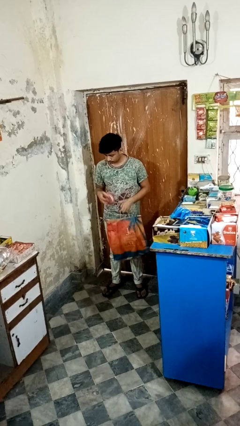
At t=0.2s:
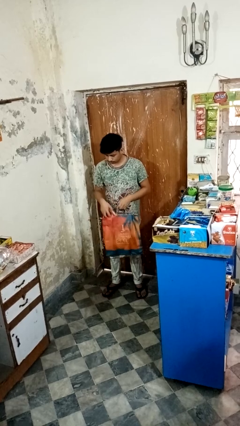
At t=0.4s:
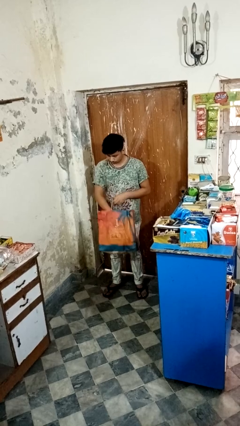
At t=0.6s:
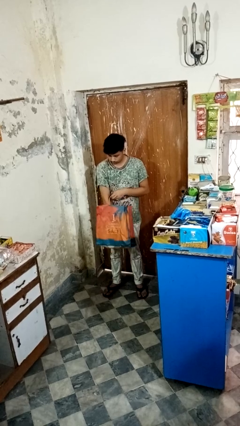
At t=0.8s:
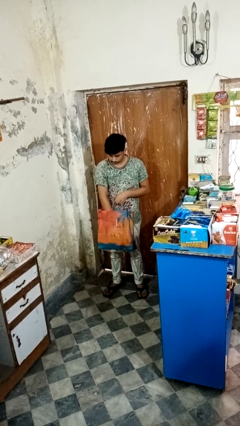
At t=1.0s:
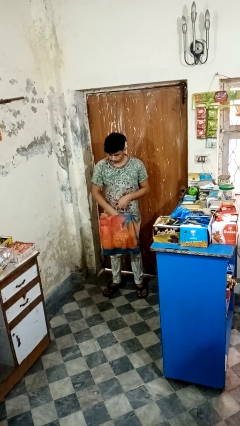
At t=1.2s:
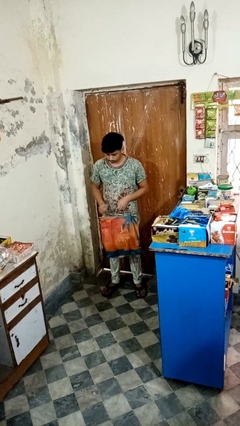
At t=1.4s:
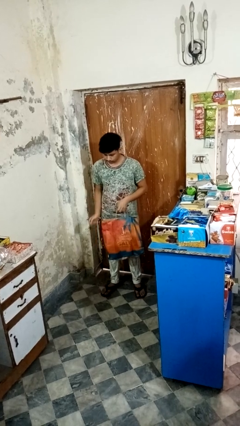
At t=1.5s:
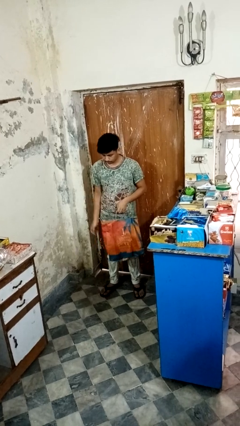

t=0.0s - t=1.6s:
person puts object into bag

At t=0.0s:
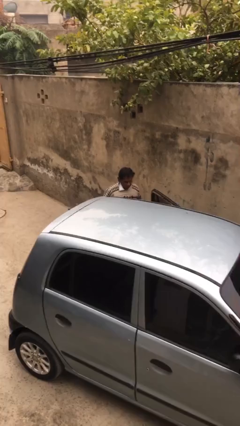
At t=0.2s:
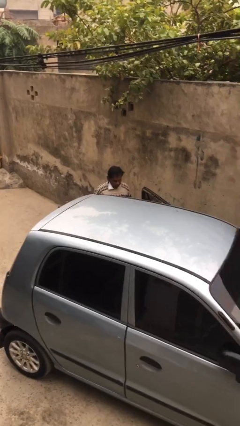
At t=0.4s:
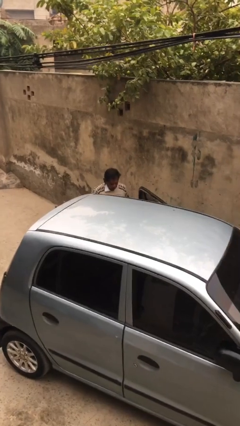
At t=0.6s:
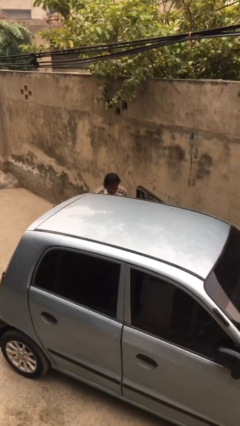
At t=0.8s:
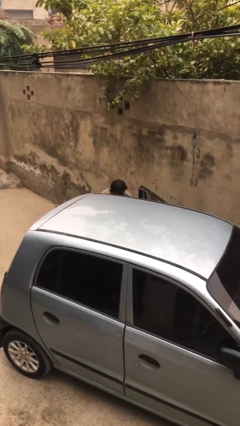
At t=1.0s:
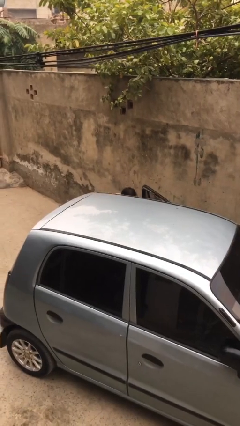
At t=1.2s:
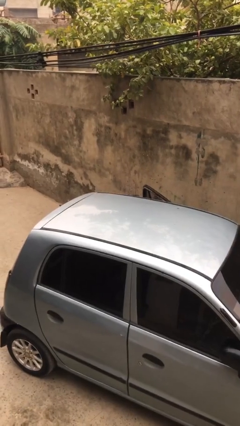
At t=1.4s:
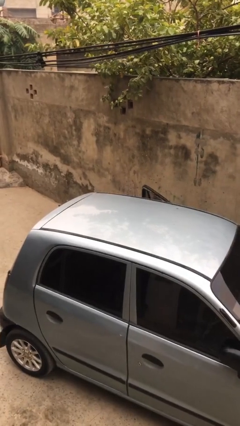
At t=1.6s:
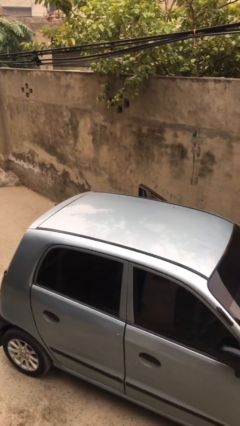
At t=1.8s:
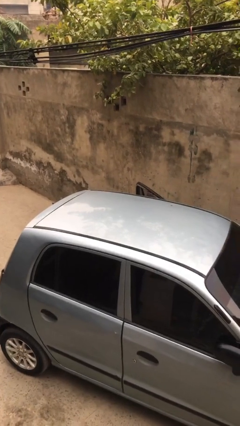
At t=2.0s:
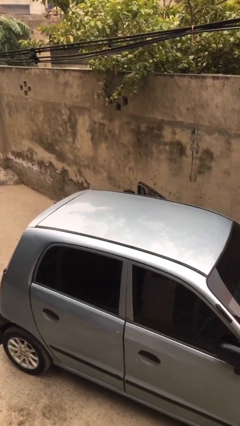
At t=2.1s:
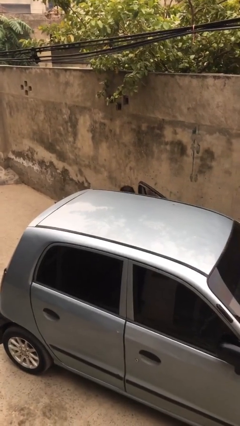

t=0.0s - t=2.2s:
person loads car

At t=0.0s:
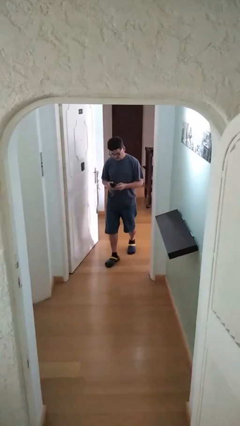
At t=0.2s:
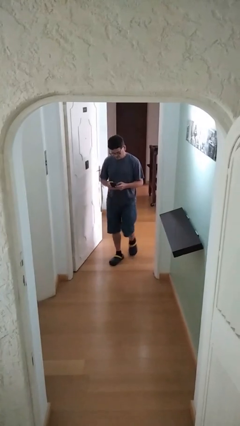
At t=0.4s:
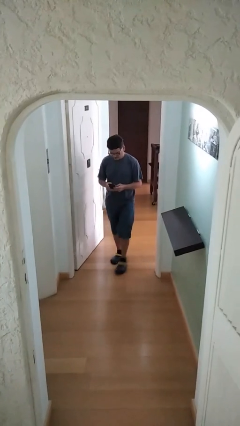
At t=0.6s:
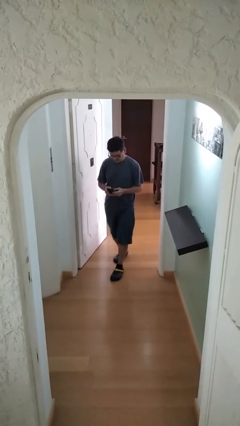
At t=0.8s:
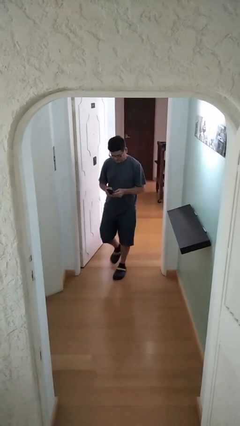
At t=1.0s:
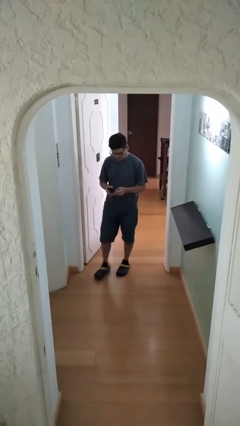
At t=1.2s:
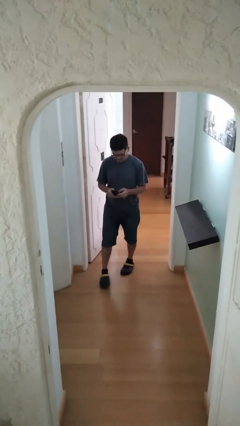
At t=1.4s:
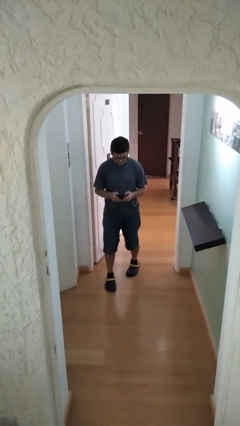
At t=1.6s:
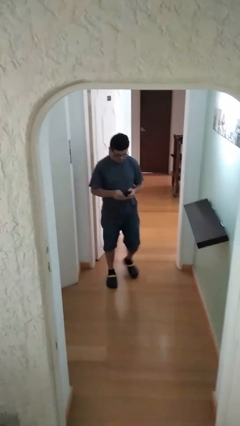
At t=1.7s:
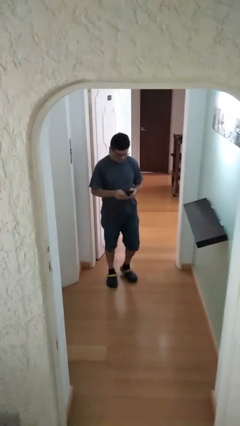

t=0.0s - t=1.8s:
person enters scene through structure

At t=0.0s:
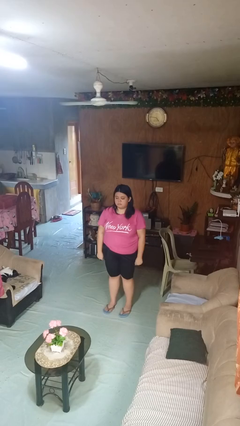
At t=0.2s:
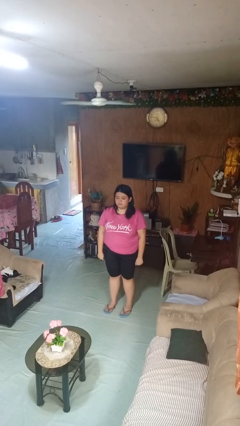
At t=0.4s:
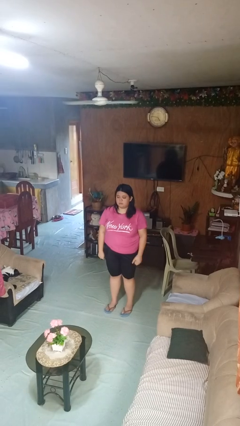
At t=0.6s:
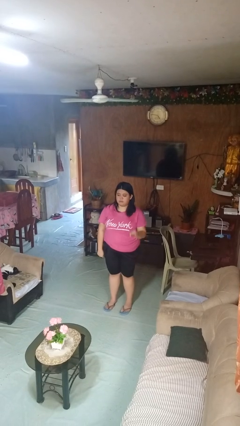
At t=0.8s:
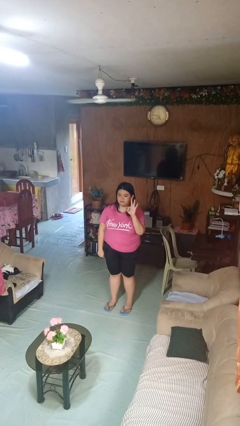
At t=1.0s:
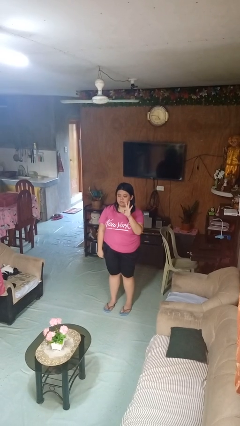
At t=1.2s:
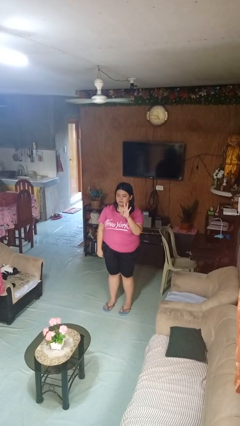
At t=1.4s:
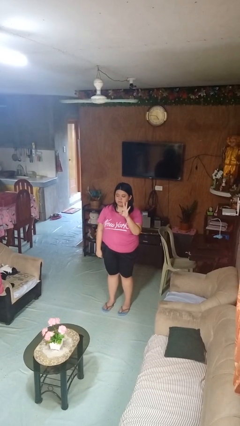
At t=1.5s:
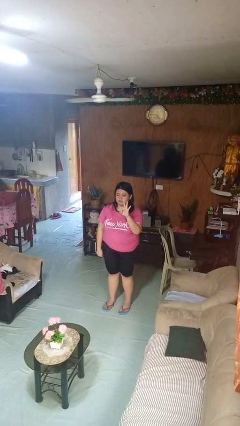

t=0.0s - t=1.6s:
person gestures number three

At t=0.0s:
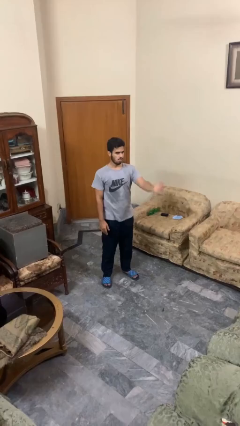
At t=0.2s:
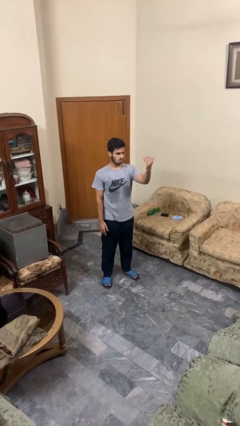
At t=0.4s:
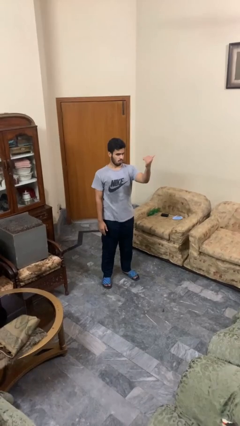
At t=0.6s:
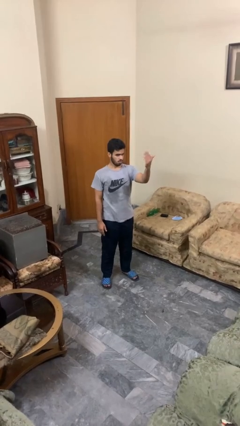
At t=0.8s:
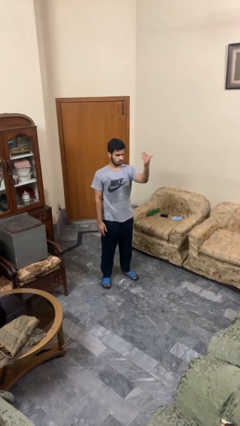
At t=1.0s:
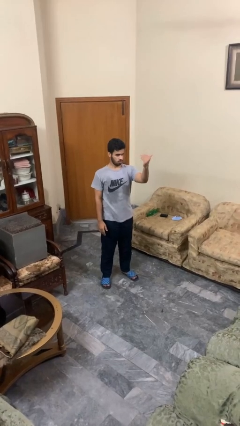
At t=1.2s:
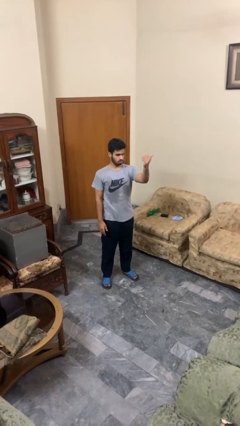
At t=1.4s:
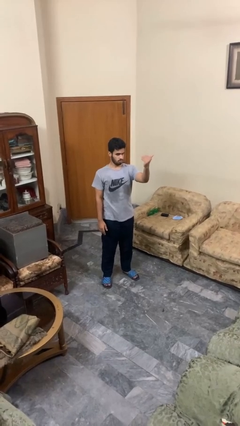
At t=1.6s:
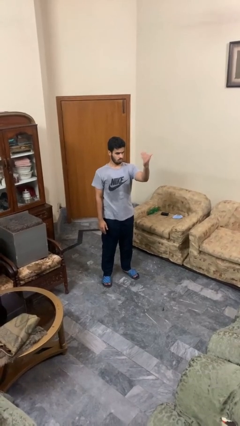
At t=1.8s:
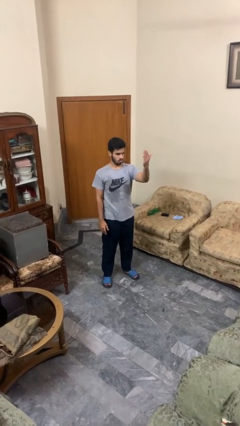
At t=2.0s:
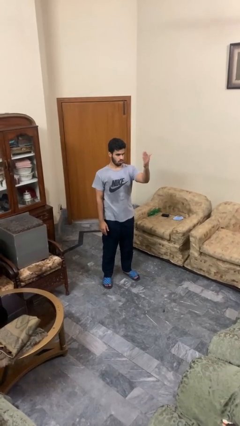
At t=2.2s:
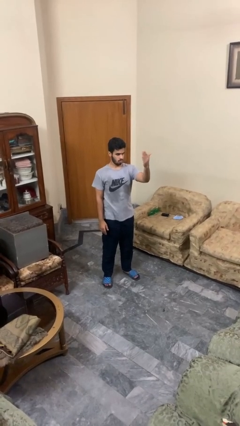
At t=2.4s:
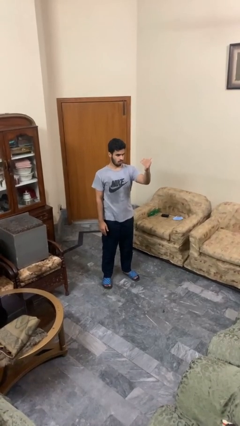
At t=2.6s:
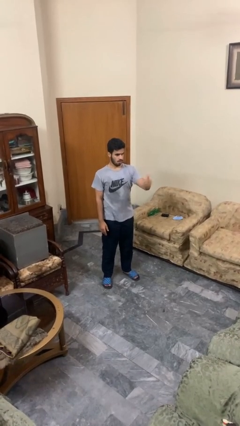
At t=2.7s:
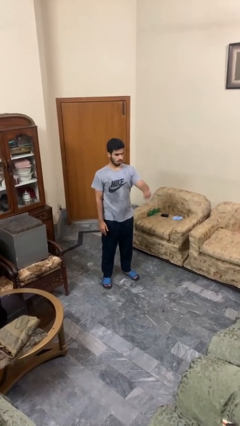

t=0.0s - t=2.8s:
person gestures come here

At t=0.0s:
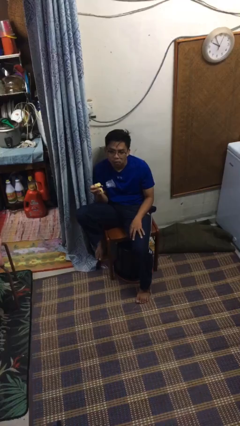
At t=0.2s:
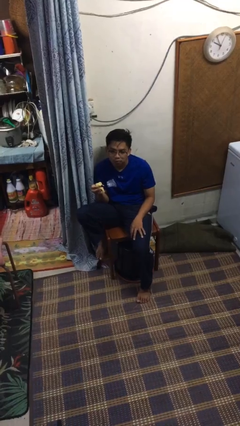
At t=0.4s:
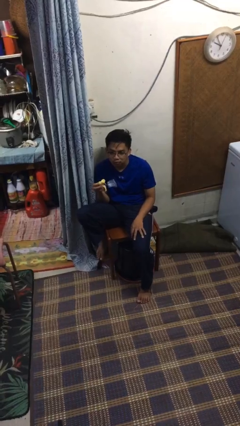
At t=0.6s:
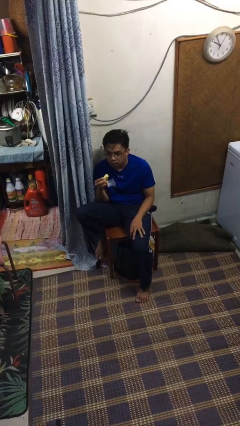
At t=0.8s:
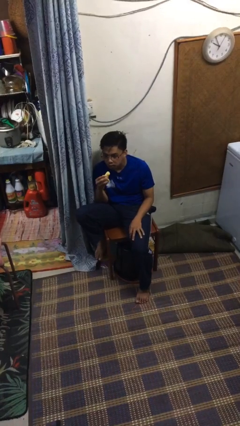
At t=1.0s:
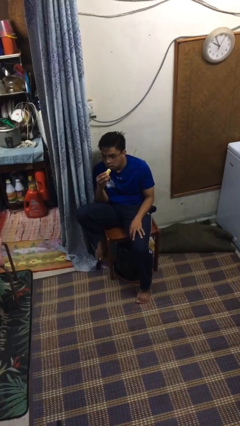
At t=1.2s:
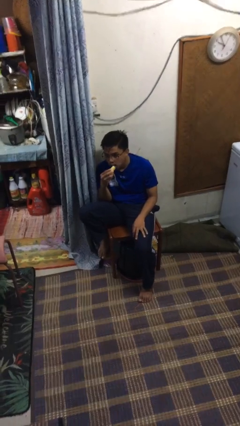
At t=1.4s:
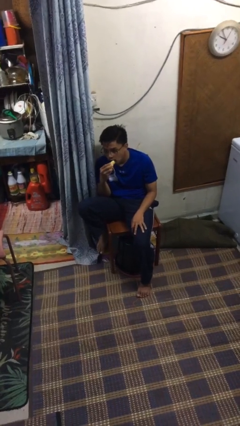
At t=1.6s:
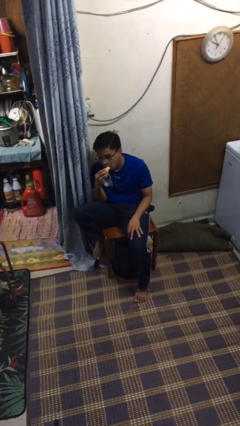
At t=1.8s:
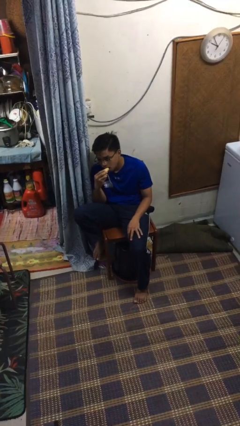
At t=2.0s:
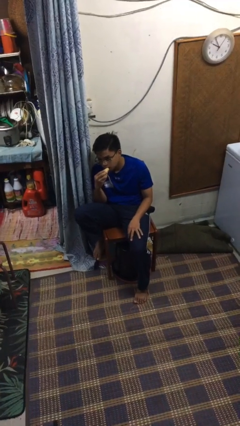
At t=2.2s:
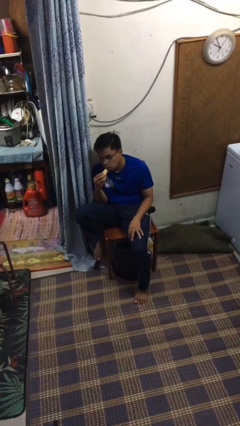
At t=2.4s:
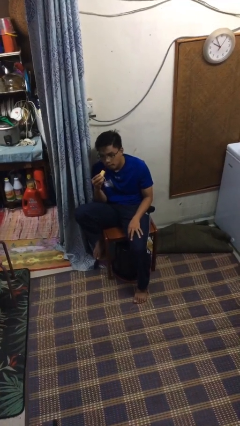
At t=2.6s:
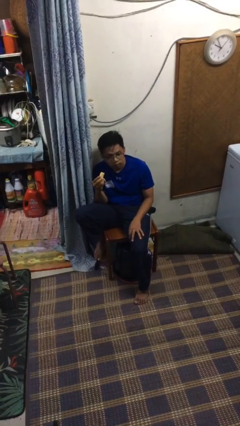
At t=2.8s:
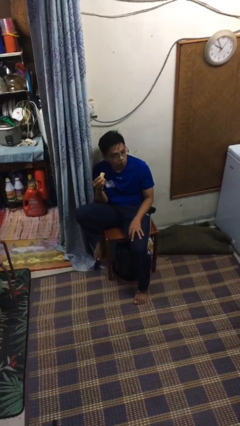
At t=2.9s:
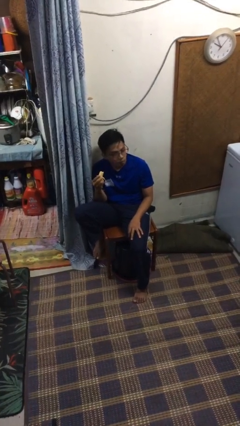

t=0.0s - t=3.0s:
person eats banana

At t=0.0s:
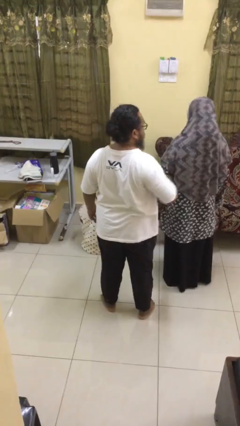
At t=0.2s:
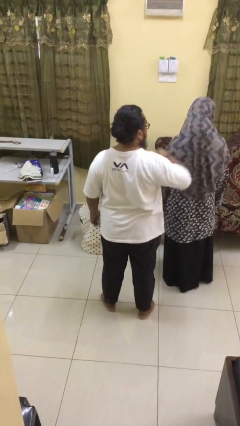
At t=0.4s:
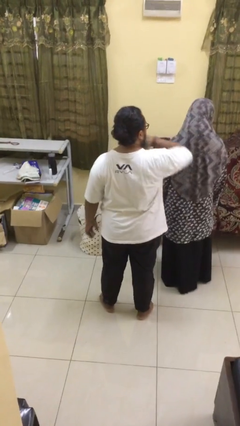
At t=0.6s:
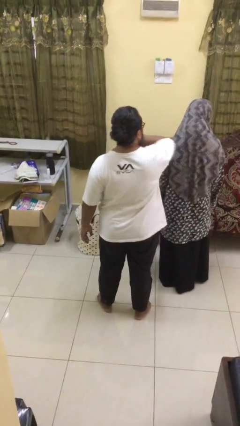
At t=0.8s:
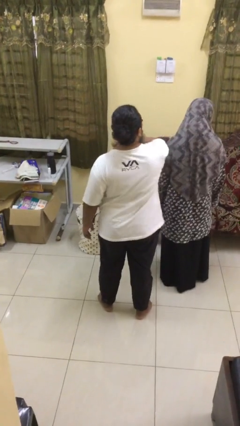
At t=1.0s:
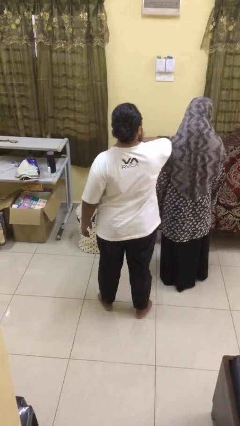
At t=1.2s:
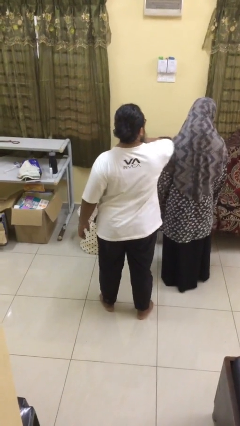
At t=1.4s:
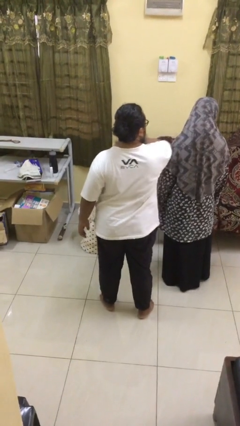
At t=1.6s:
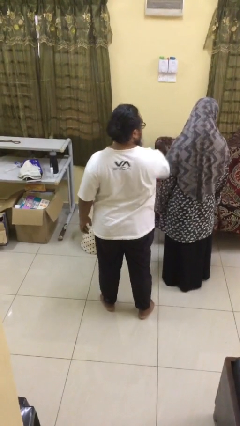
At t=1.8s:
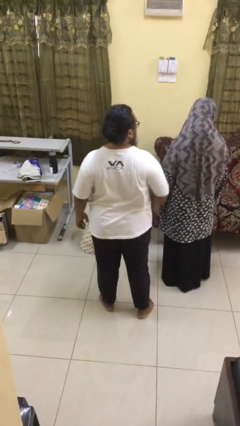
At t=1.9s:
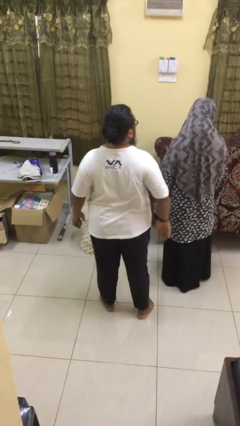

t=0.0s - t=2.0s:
person nudges person with elbow

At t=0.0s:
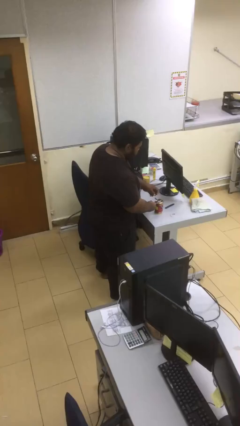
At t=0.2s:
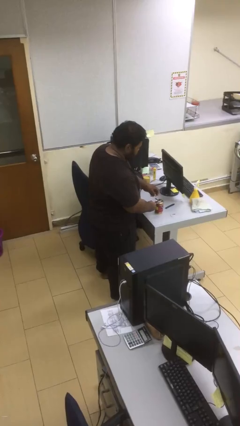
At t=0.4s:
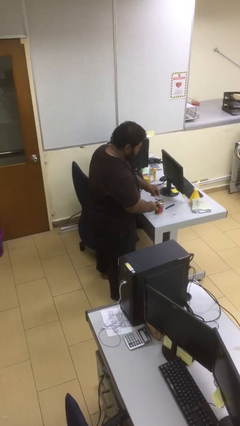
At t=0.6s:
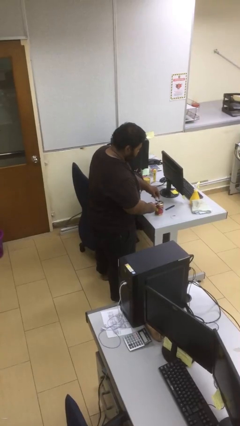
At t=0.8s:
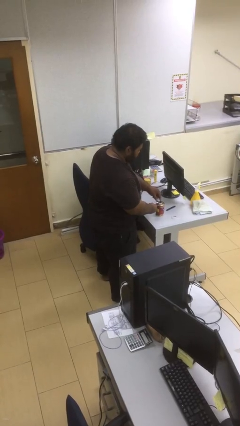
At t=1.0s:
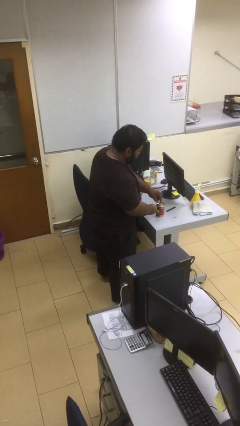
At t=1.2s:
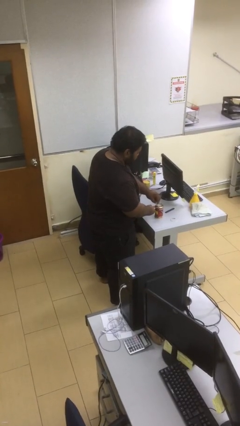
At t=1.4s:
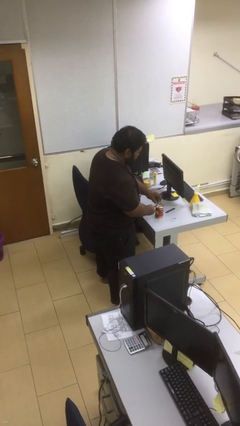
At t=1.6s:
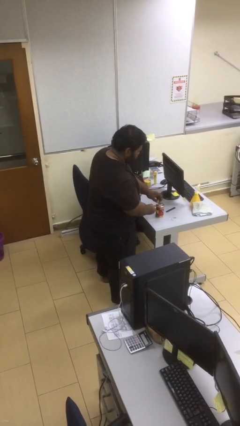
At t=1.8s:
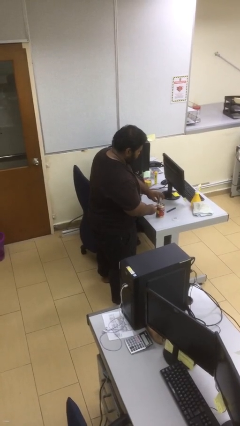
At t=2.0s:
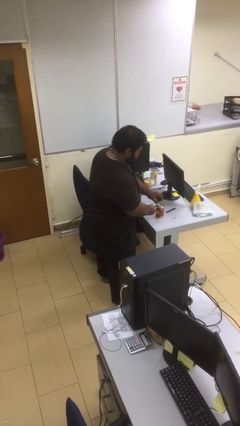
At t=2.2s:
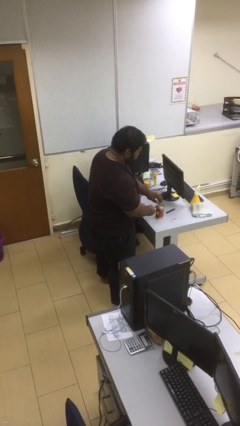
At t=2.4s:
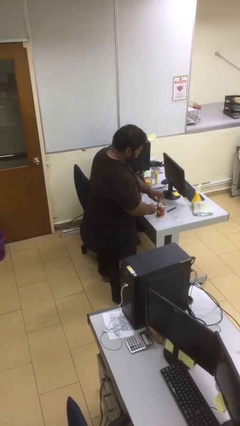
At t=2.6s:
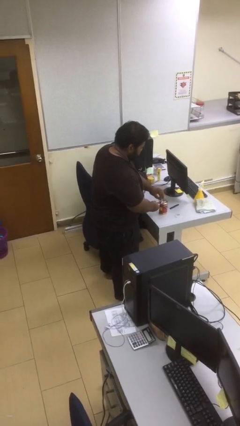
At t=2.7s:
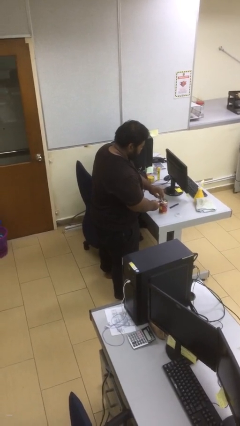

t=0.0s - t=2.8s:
person opens can with can opener
